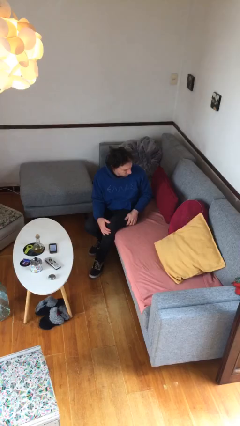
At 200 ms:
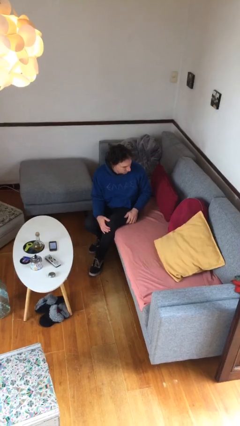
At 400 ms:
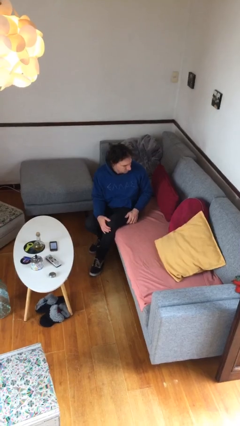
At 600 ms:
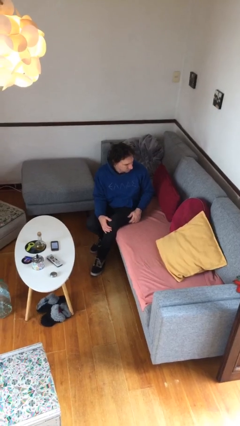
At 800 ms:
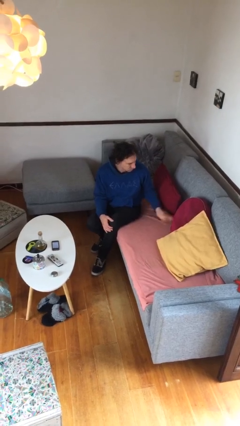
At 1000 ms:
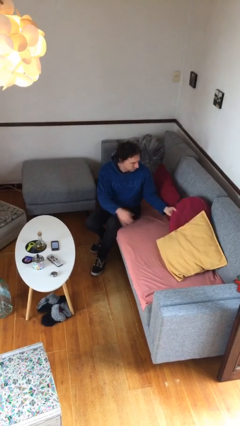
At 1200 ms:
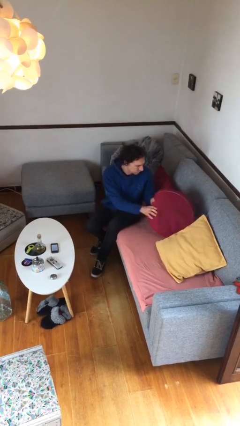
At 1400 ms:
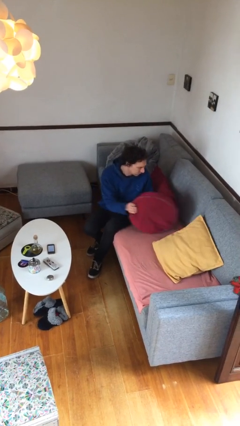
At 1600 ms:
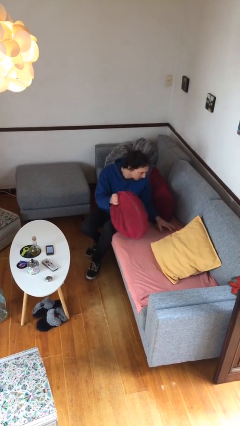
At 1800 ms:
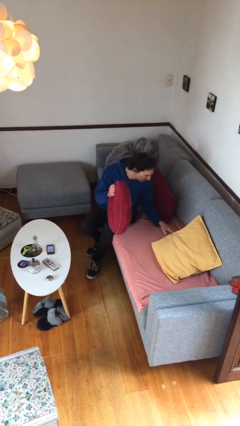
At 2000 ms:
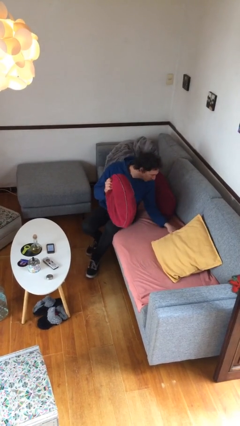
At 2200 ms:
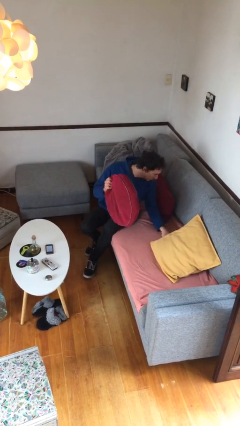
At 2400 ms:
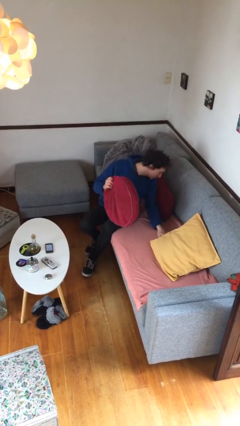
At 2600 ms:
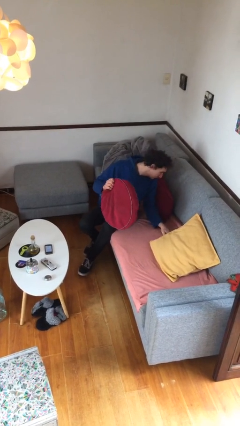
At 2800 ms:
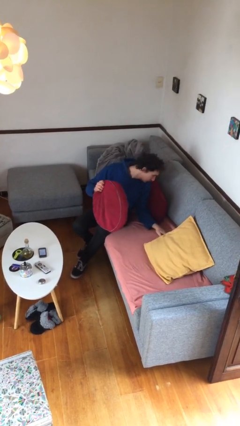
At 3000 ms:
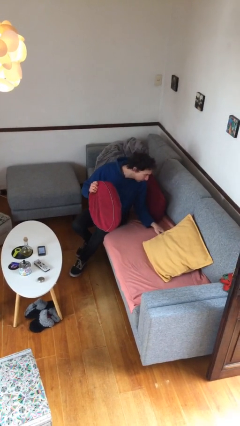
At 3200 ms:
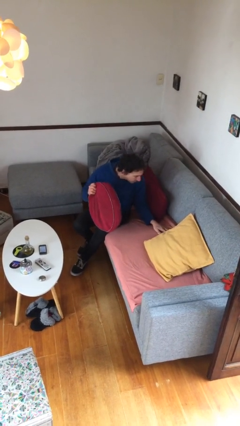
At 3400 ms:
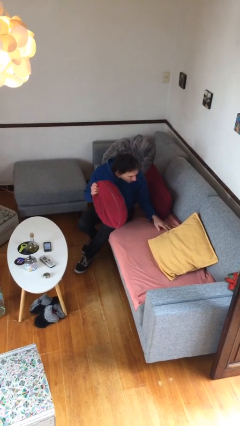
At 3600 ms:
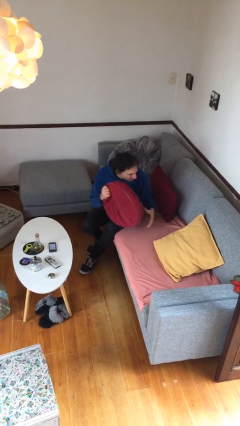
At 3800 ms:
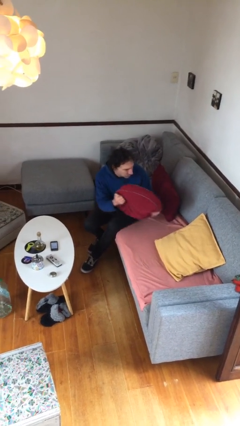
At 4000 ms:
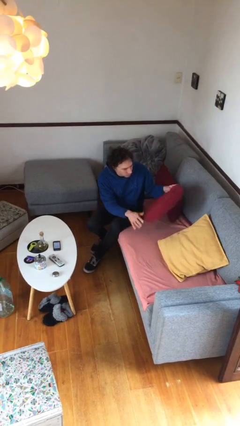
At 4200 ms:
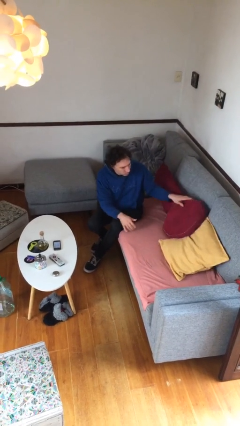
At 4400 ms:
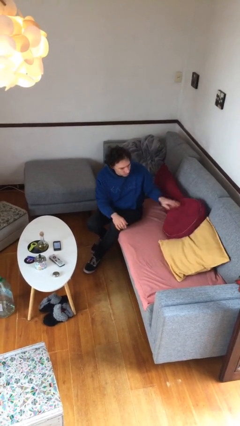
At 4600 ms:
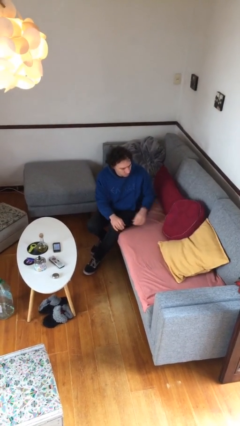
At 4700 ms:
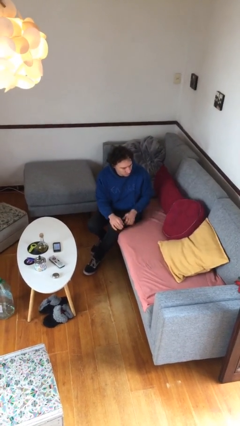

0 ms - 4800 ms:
person searches in couch

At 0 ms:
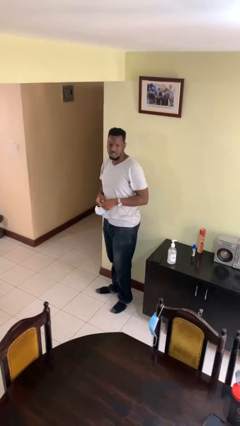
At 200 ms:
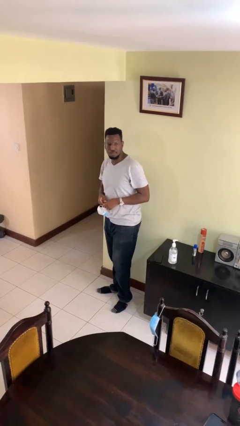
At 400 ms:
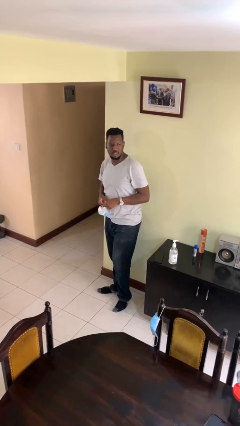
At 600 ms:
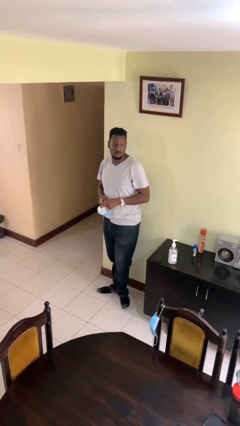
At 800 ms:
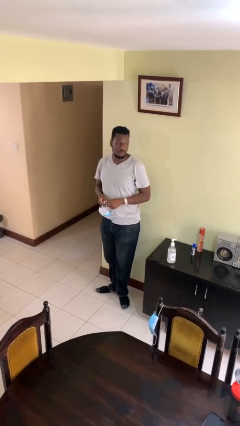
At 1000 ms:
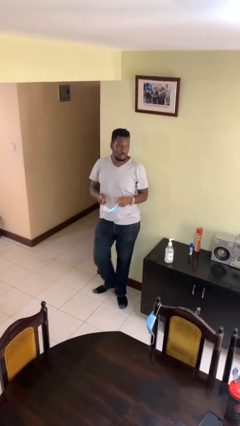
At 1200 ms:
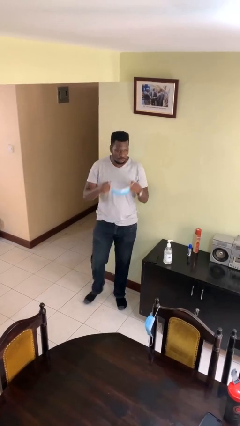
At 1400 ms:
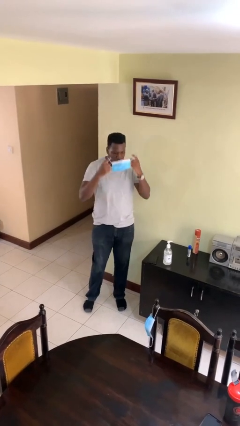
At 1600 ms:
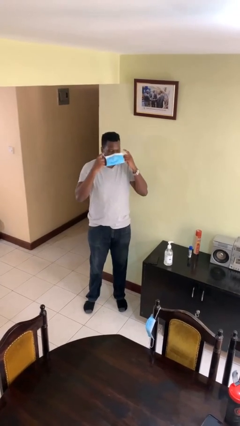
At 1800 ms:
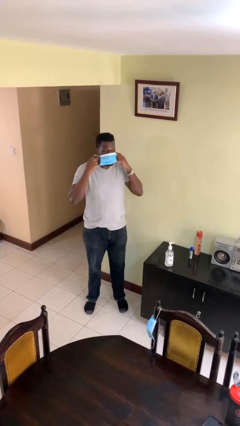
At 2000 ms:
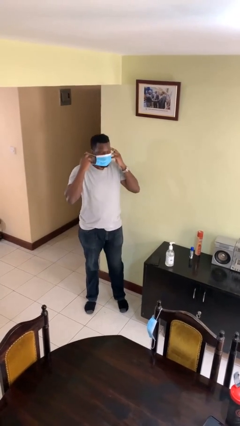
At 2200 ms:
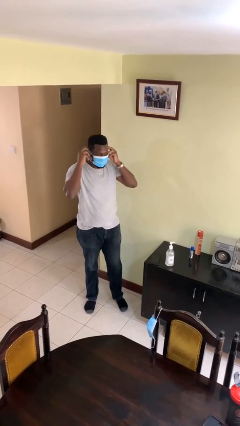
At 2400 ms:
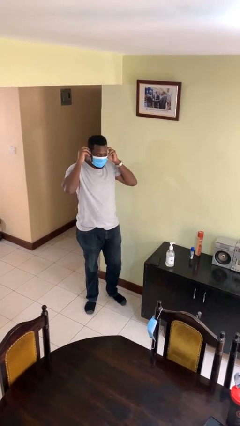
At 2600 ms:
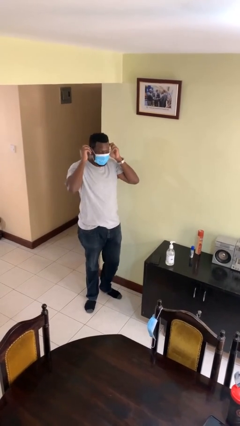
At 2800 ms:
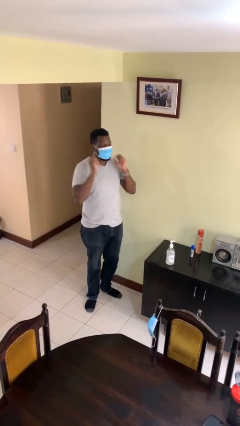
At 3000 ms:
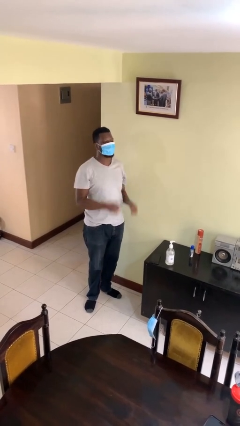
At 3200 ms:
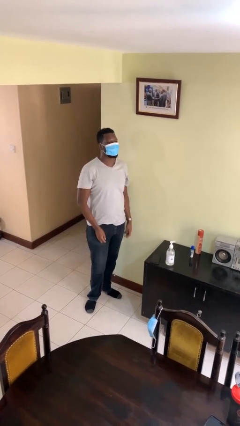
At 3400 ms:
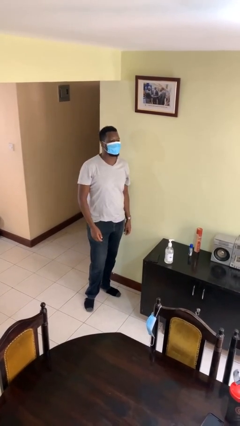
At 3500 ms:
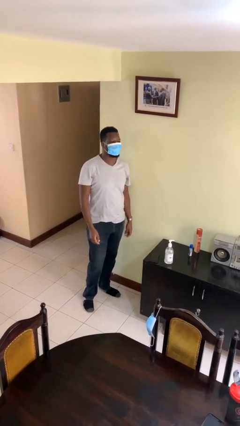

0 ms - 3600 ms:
person puts on facemask

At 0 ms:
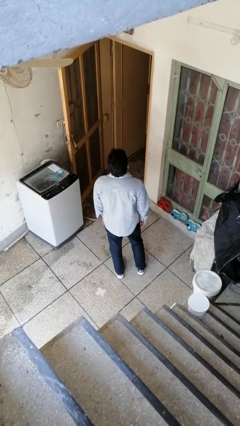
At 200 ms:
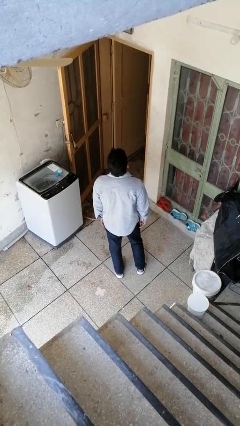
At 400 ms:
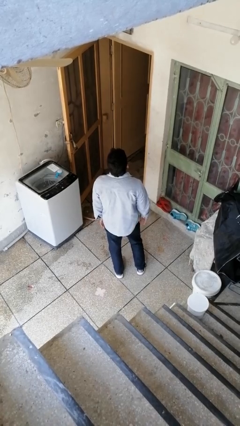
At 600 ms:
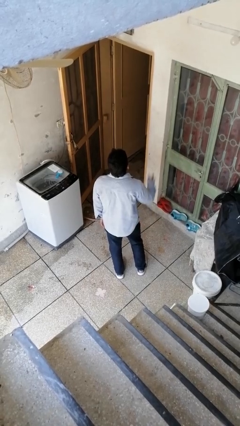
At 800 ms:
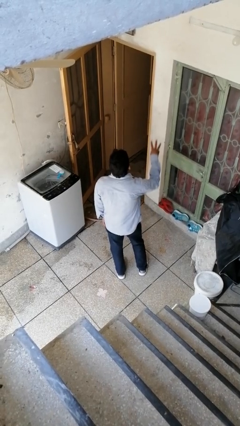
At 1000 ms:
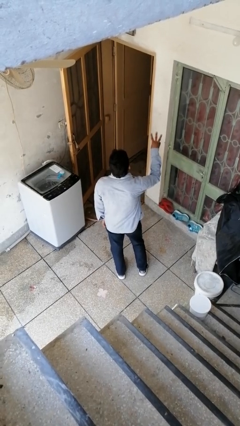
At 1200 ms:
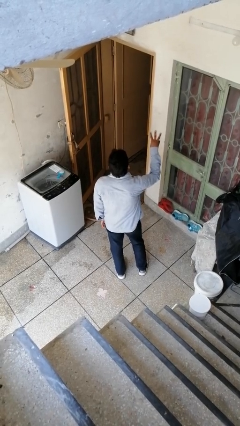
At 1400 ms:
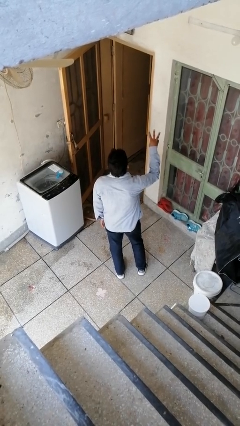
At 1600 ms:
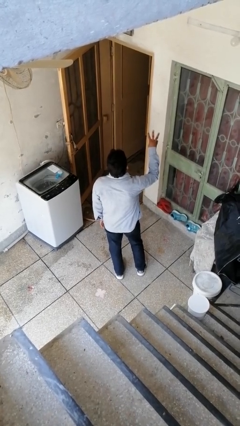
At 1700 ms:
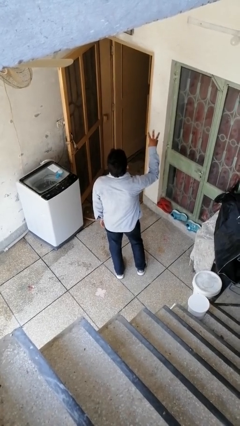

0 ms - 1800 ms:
person gestures number three

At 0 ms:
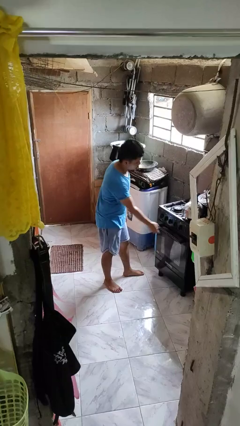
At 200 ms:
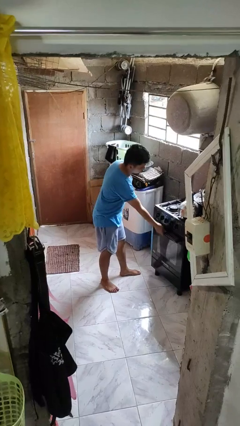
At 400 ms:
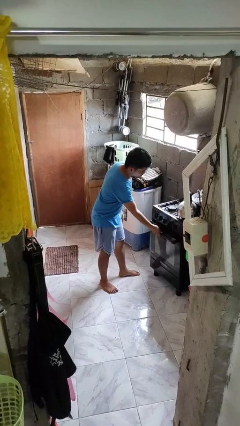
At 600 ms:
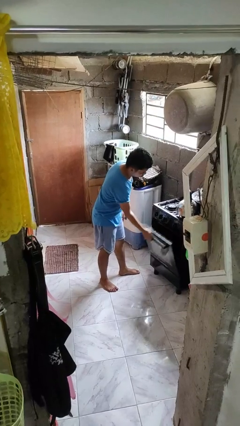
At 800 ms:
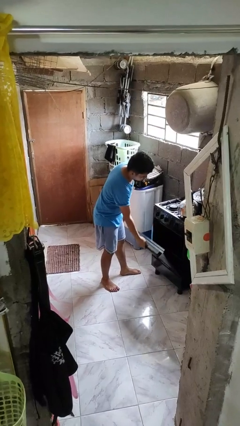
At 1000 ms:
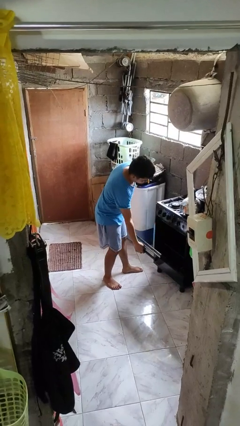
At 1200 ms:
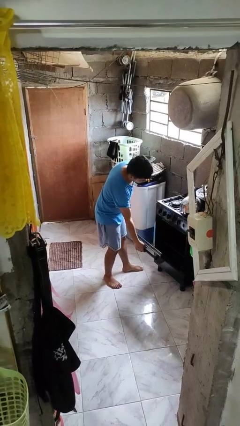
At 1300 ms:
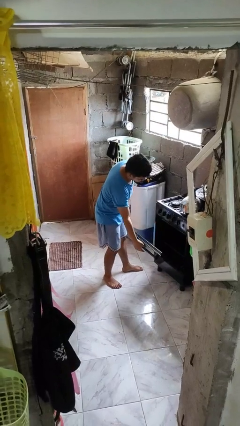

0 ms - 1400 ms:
person opens oven door

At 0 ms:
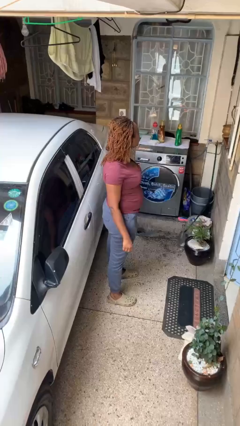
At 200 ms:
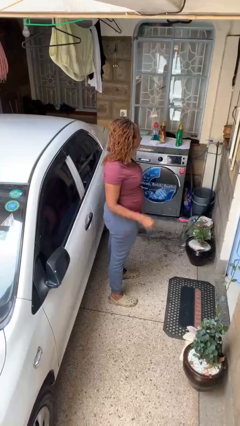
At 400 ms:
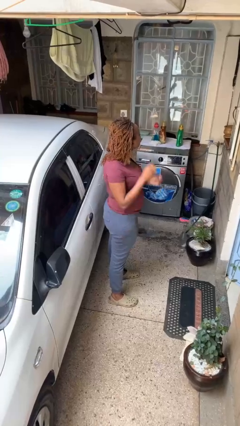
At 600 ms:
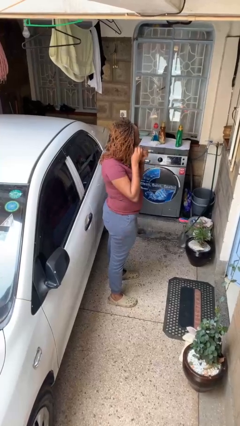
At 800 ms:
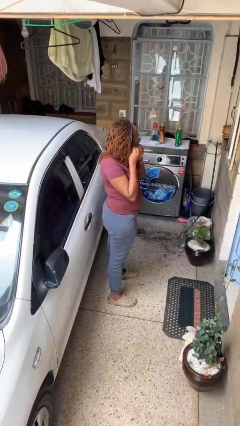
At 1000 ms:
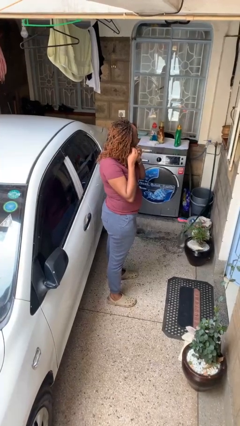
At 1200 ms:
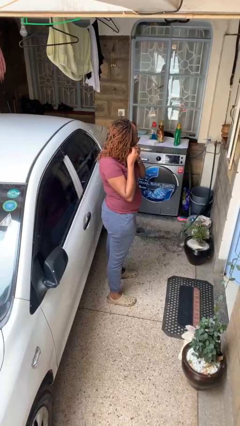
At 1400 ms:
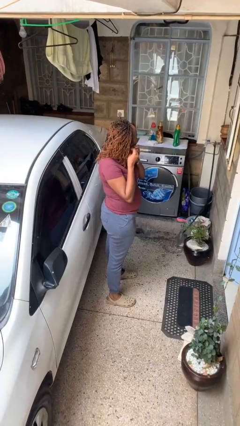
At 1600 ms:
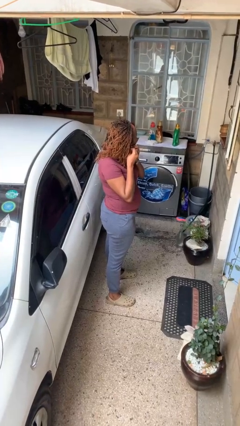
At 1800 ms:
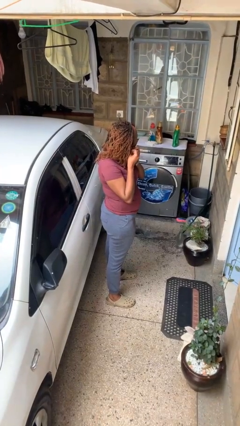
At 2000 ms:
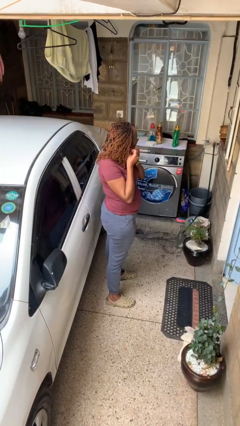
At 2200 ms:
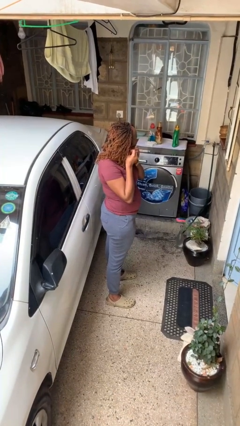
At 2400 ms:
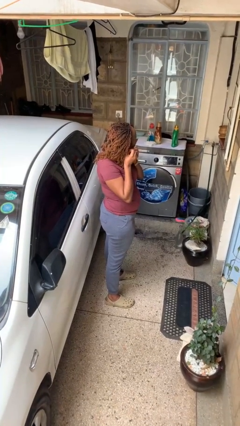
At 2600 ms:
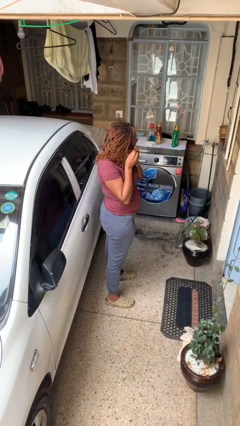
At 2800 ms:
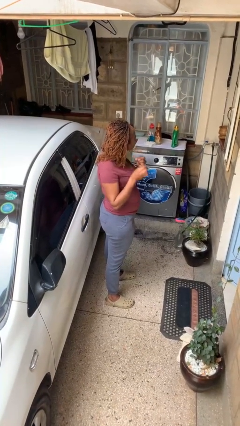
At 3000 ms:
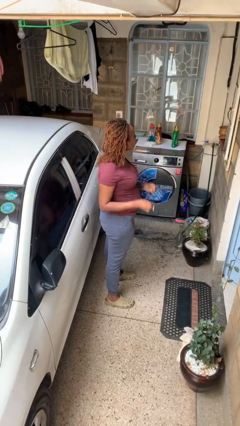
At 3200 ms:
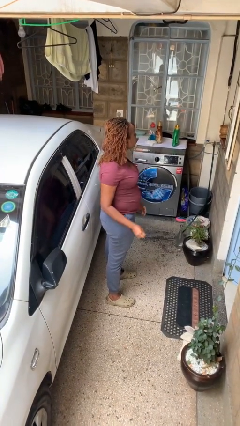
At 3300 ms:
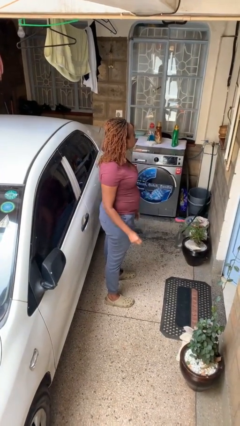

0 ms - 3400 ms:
person takes off earrings

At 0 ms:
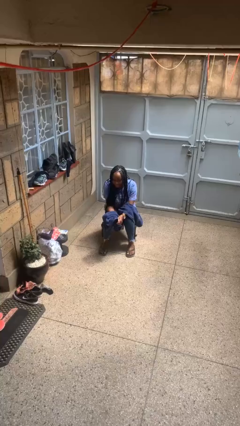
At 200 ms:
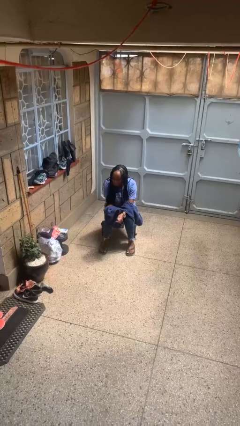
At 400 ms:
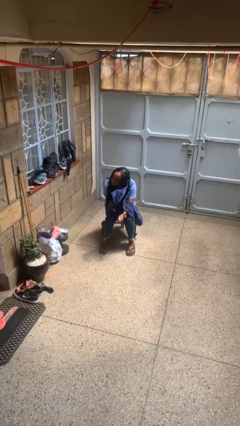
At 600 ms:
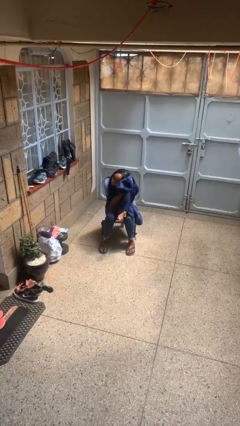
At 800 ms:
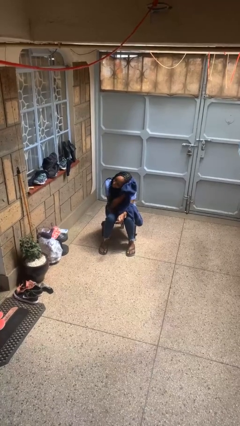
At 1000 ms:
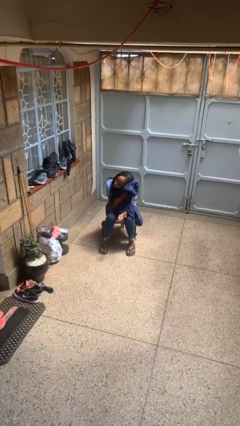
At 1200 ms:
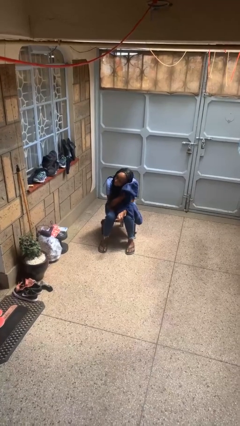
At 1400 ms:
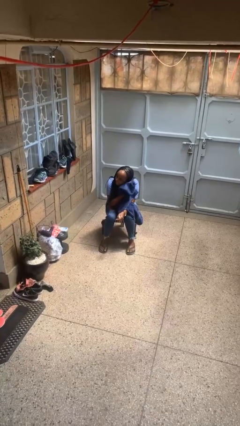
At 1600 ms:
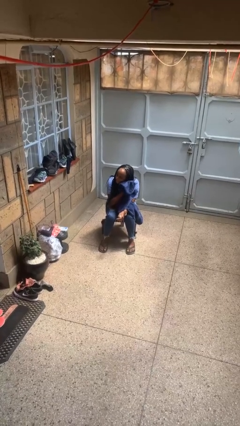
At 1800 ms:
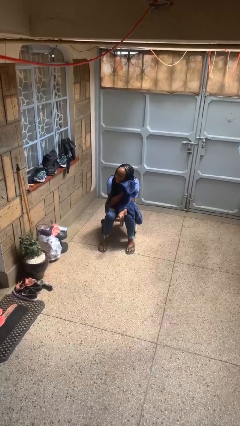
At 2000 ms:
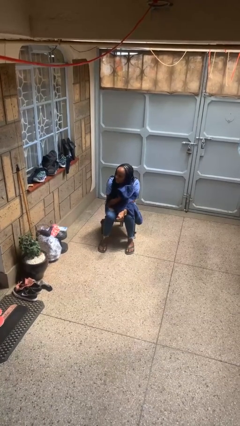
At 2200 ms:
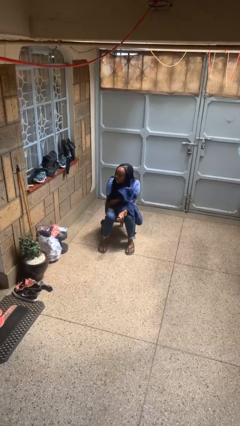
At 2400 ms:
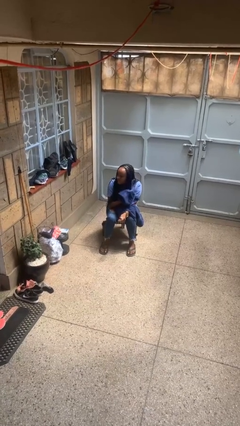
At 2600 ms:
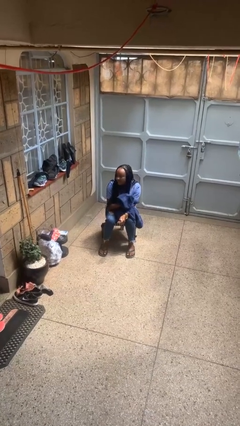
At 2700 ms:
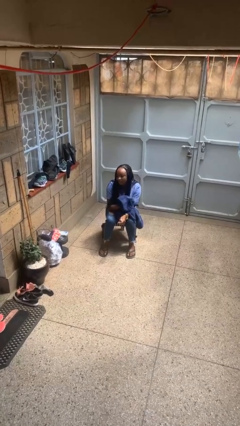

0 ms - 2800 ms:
person dries hair with towel
